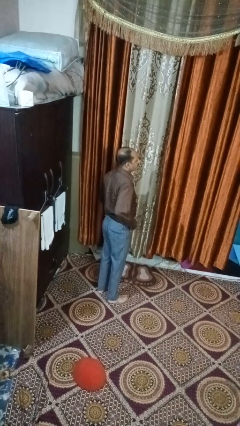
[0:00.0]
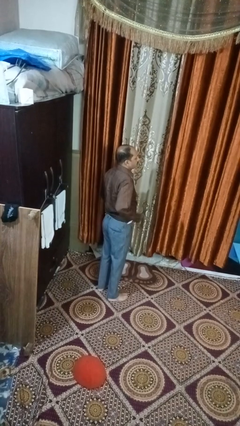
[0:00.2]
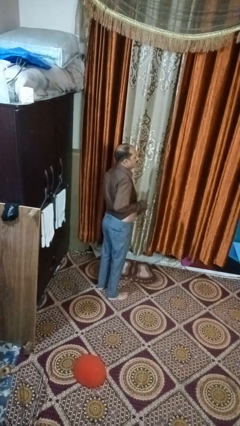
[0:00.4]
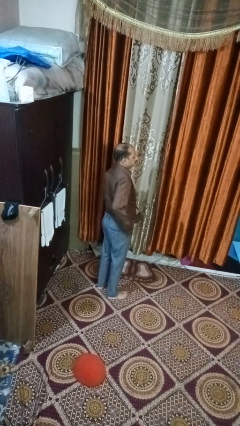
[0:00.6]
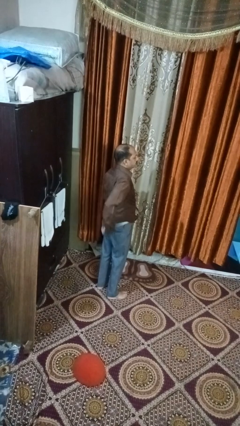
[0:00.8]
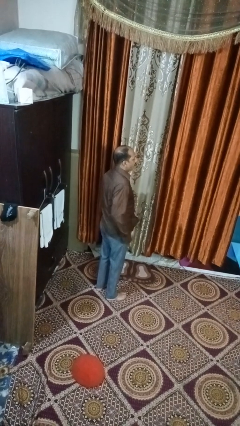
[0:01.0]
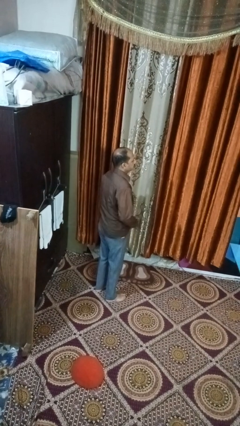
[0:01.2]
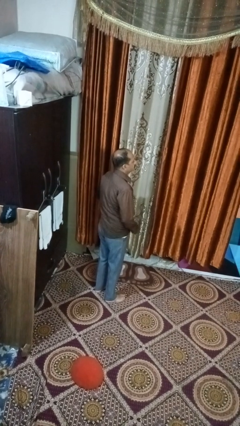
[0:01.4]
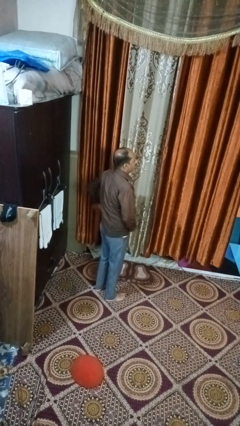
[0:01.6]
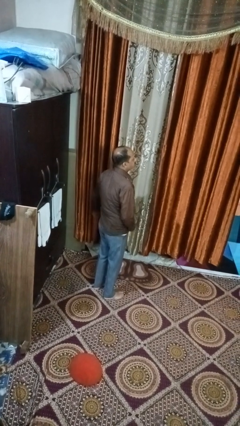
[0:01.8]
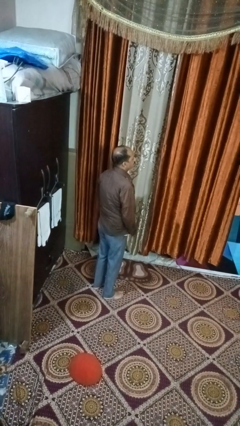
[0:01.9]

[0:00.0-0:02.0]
person untucks shirt

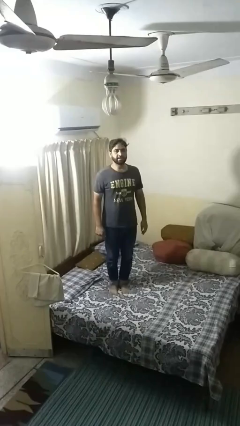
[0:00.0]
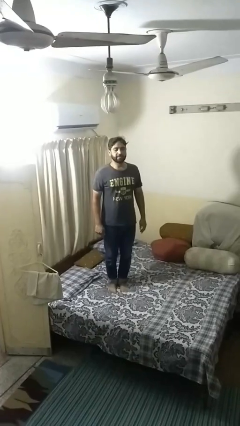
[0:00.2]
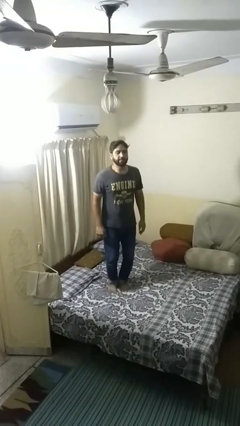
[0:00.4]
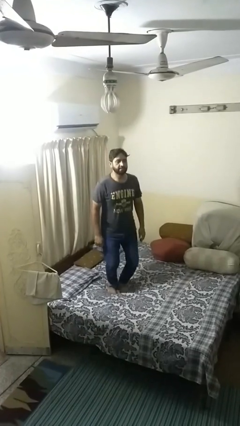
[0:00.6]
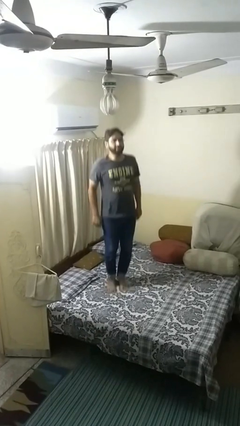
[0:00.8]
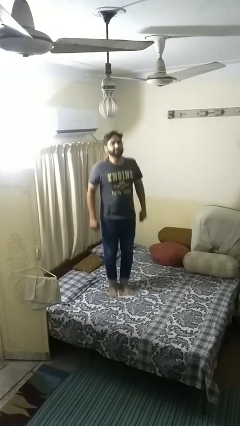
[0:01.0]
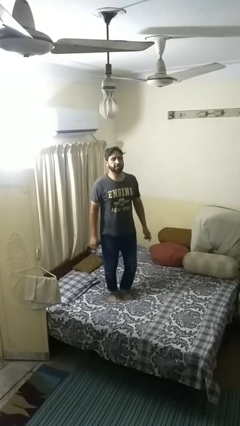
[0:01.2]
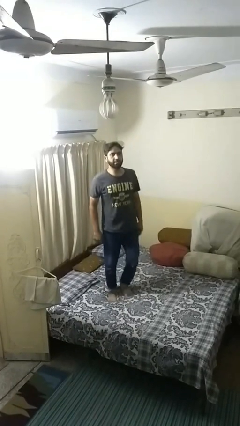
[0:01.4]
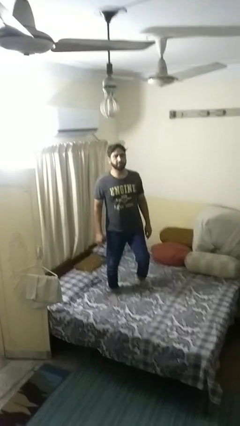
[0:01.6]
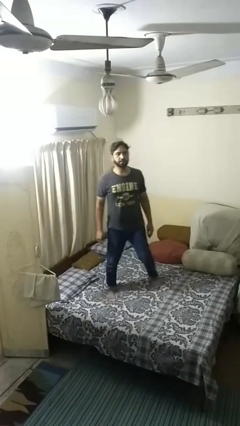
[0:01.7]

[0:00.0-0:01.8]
person jumps on bed

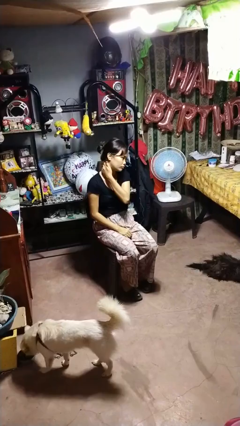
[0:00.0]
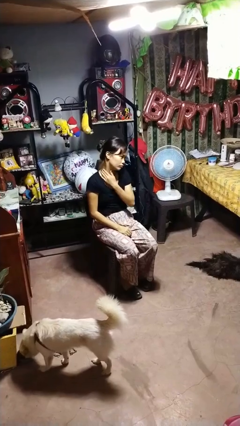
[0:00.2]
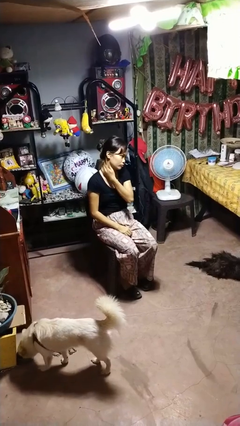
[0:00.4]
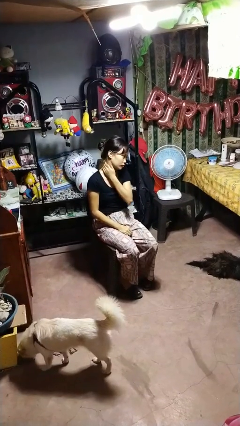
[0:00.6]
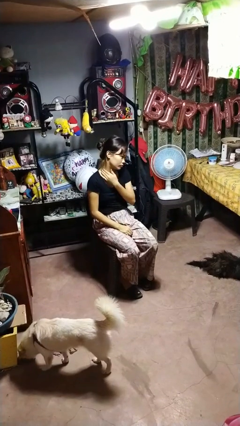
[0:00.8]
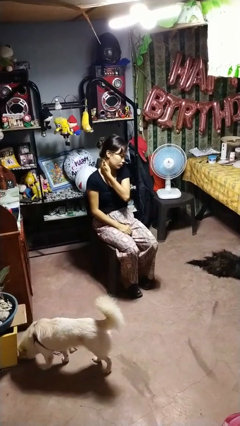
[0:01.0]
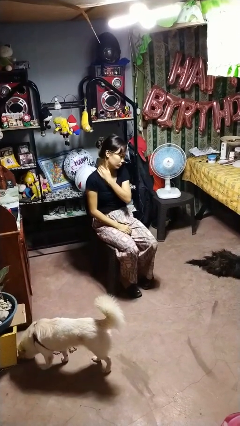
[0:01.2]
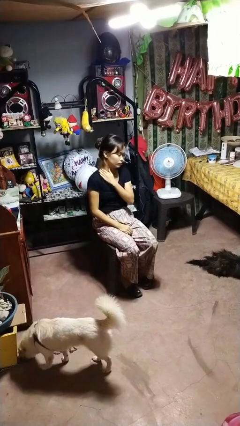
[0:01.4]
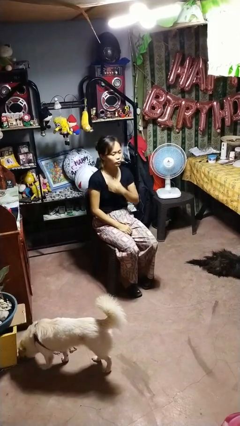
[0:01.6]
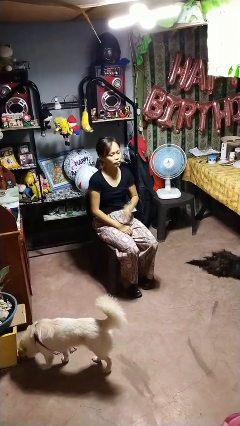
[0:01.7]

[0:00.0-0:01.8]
person rubs neck

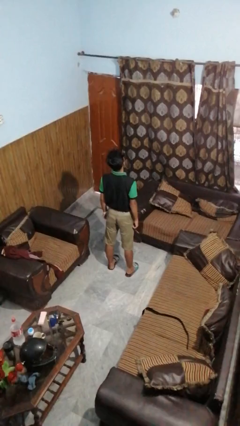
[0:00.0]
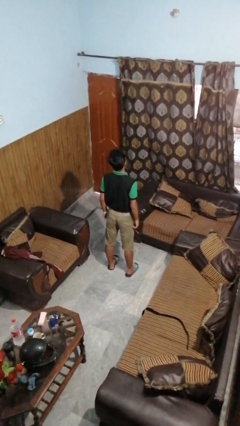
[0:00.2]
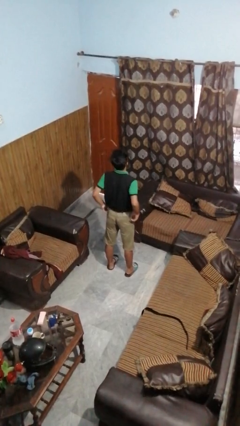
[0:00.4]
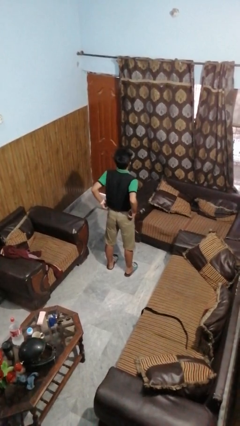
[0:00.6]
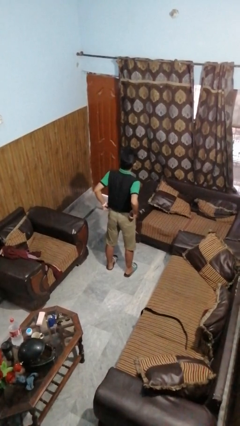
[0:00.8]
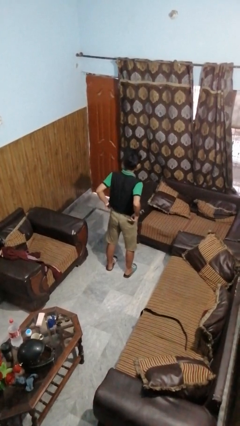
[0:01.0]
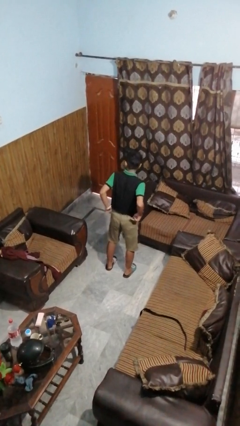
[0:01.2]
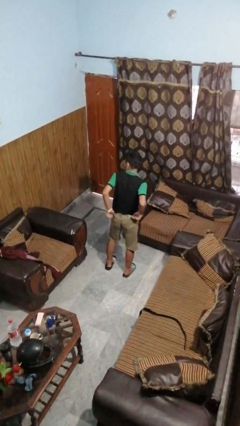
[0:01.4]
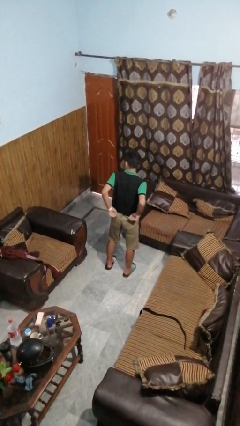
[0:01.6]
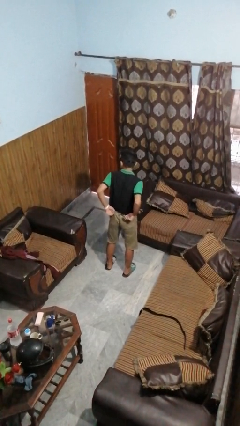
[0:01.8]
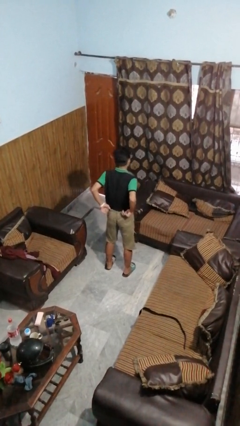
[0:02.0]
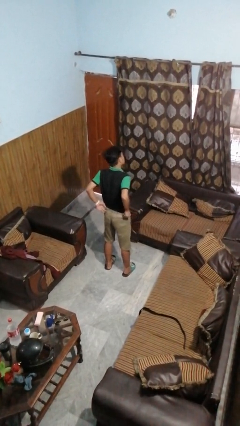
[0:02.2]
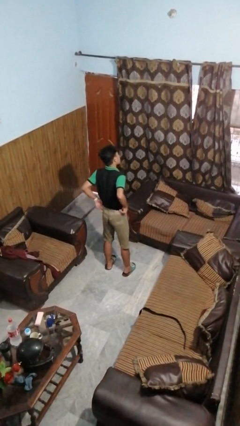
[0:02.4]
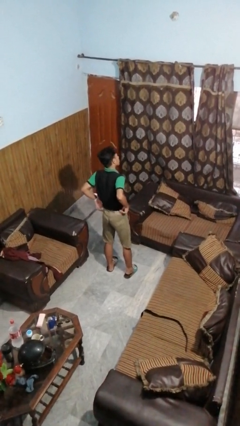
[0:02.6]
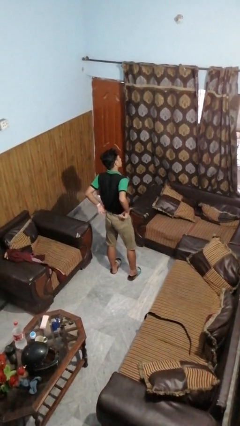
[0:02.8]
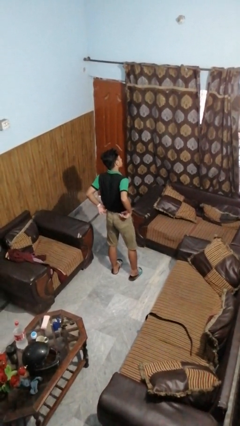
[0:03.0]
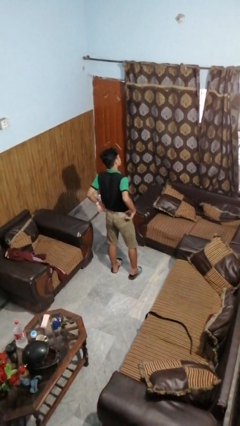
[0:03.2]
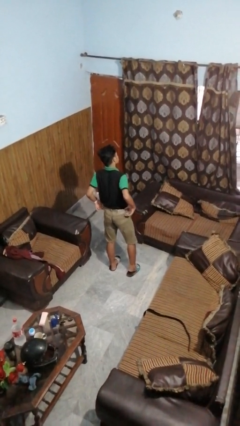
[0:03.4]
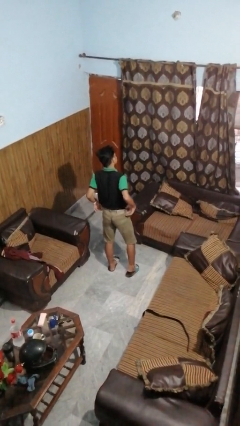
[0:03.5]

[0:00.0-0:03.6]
person hikes up pants

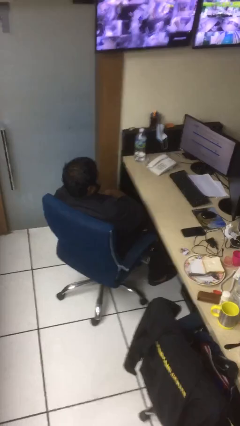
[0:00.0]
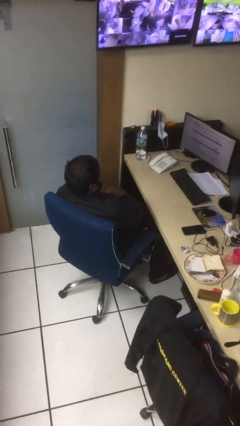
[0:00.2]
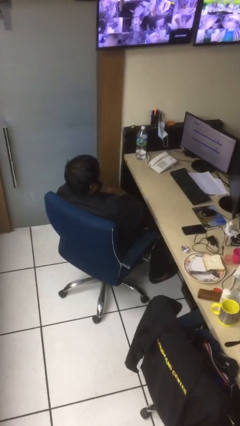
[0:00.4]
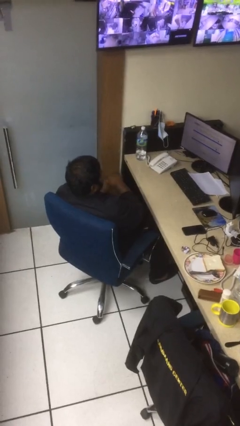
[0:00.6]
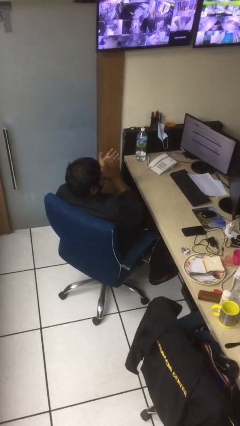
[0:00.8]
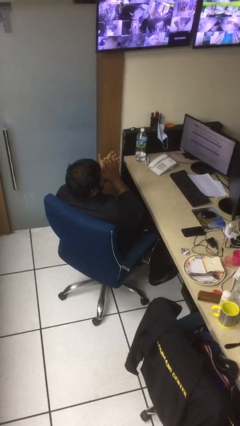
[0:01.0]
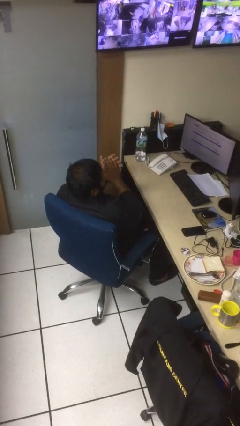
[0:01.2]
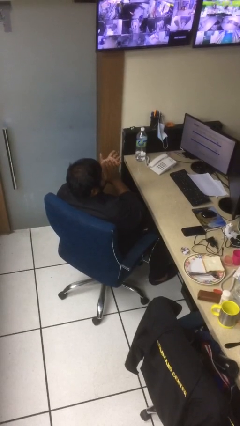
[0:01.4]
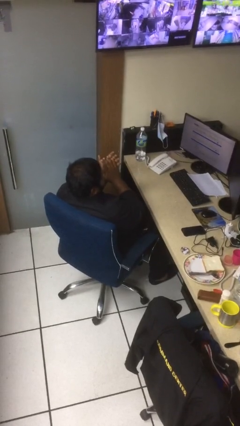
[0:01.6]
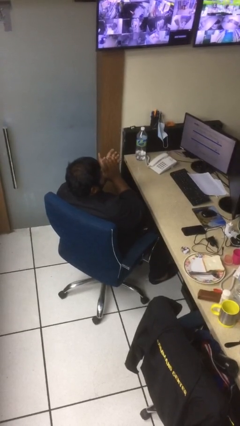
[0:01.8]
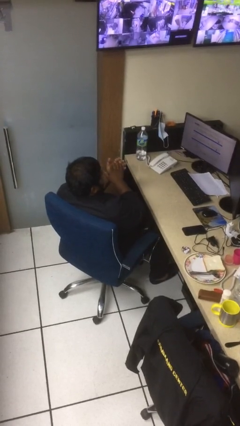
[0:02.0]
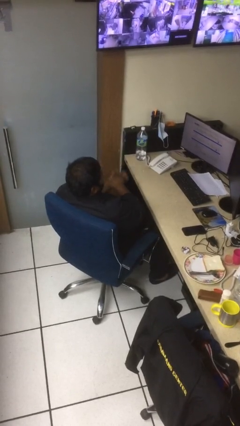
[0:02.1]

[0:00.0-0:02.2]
person claps hands

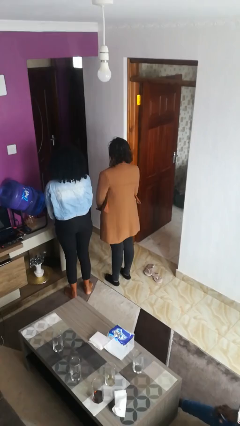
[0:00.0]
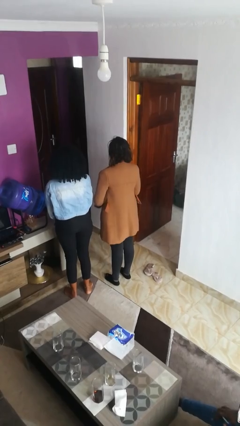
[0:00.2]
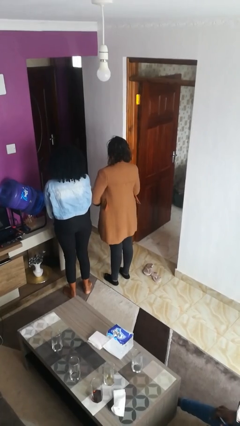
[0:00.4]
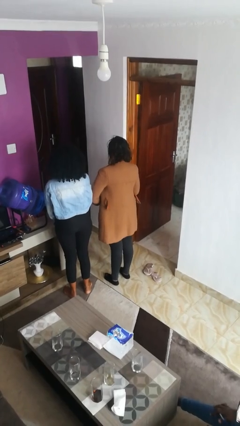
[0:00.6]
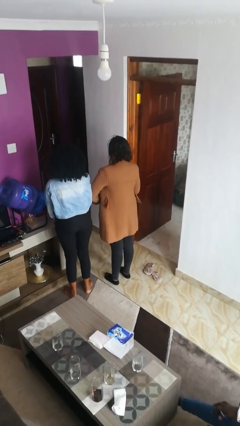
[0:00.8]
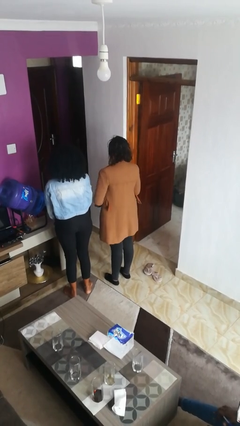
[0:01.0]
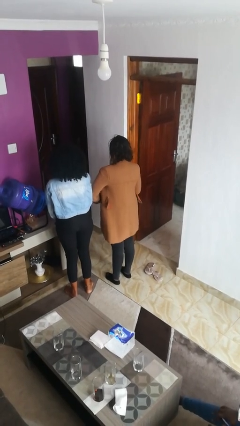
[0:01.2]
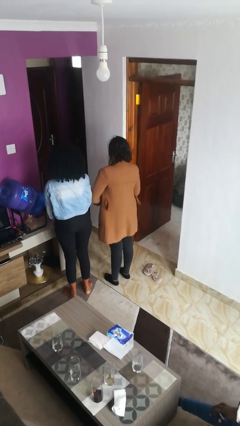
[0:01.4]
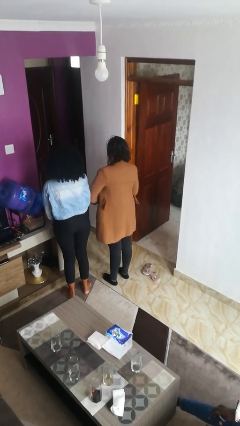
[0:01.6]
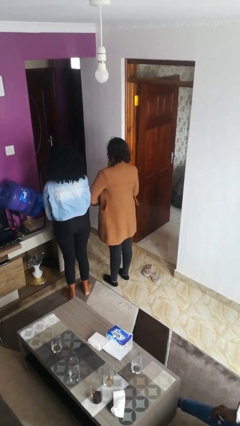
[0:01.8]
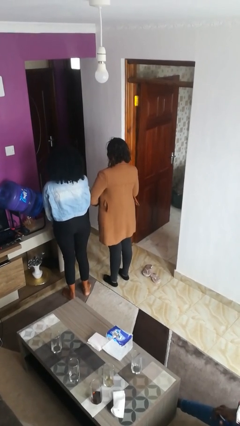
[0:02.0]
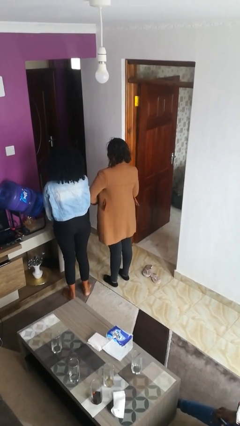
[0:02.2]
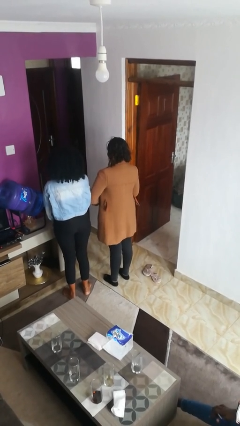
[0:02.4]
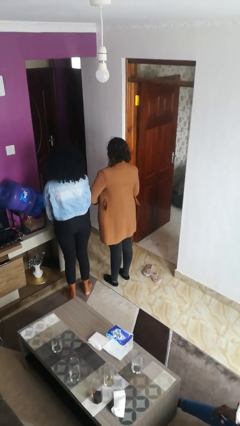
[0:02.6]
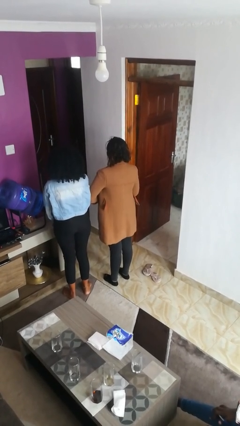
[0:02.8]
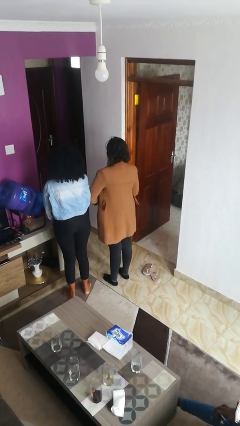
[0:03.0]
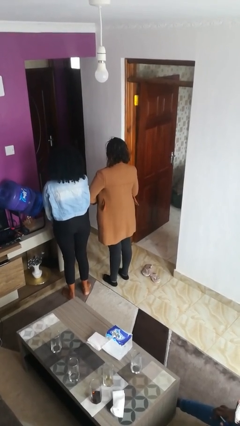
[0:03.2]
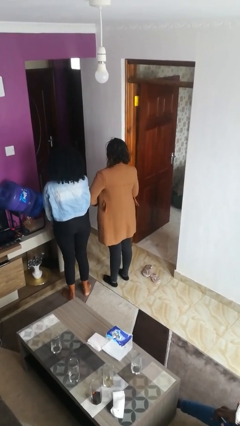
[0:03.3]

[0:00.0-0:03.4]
person nudges person with elbow

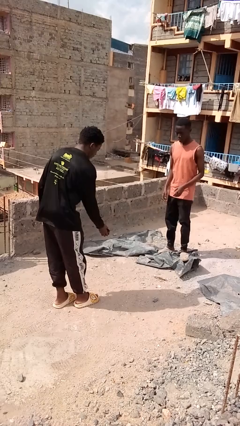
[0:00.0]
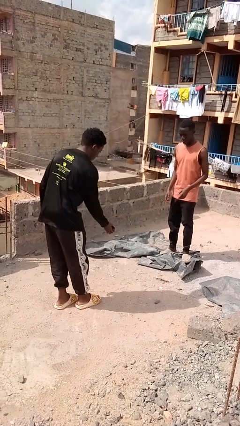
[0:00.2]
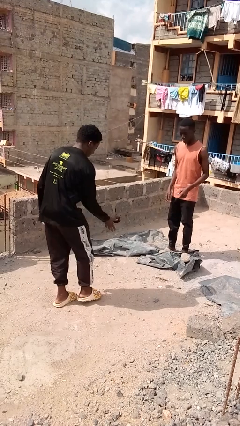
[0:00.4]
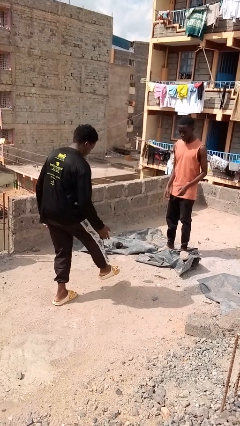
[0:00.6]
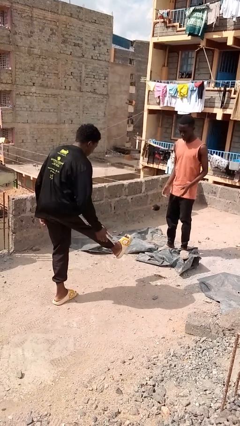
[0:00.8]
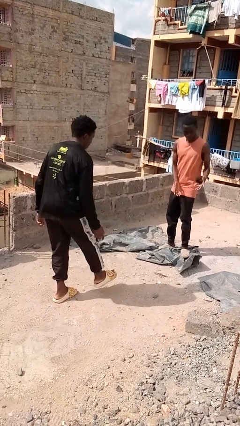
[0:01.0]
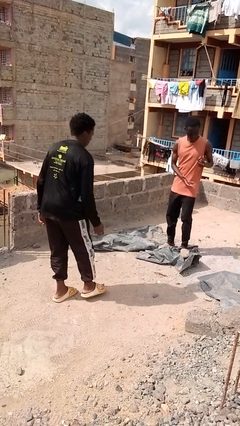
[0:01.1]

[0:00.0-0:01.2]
person kicks object to person

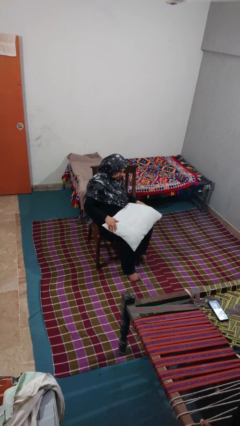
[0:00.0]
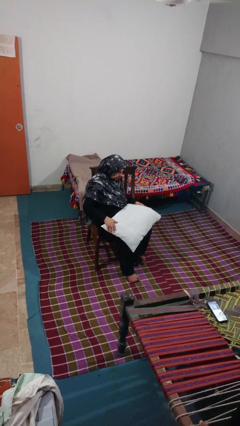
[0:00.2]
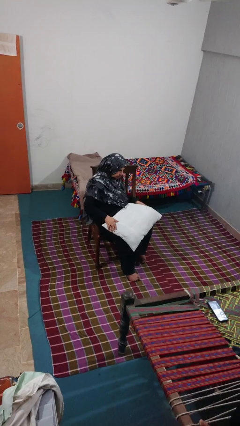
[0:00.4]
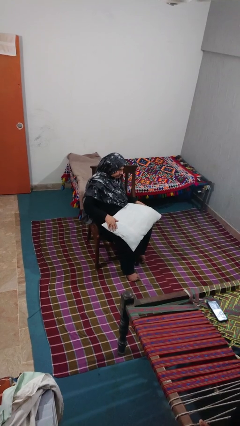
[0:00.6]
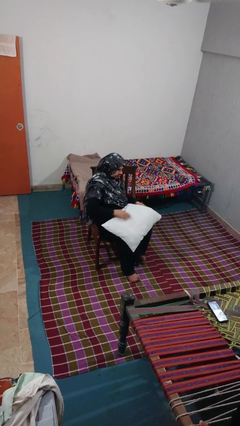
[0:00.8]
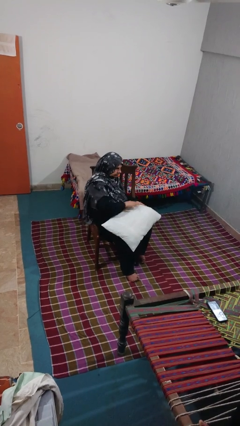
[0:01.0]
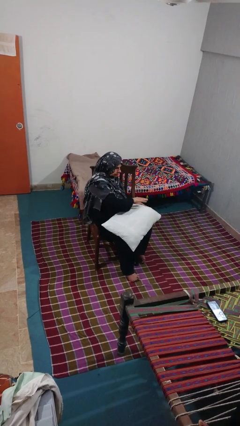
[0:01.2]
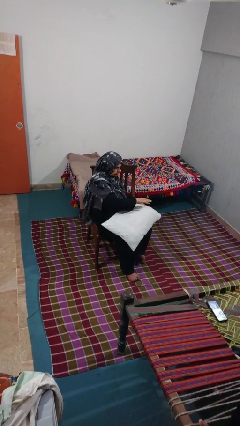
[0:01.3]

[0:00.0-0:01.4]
person waves hand over object
